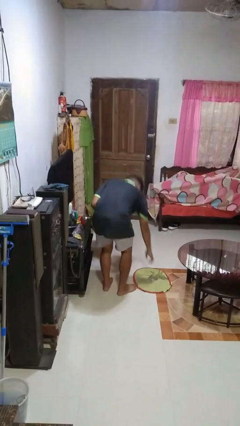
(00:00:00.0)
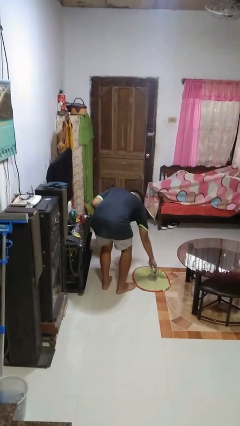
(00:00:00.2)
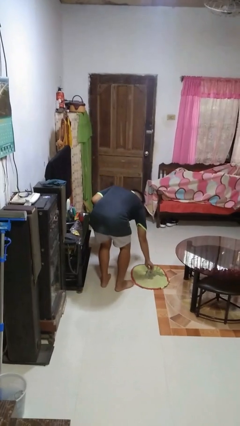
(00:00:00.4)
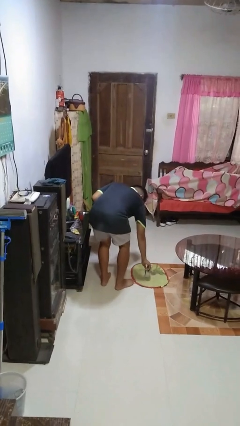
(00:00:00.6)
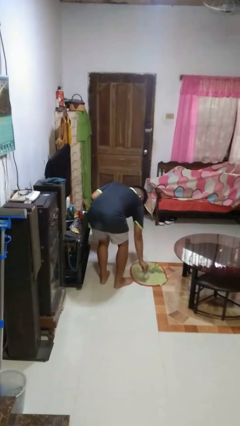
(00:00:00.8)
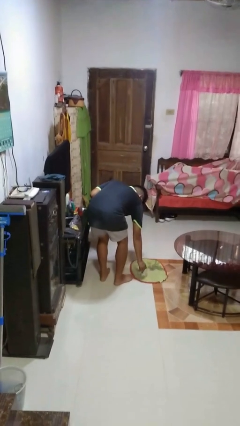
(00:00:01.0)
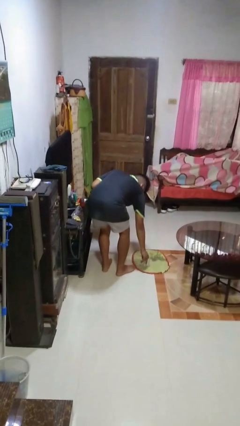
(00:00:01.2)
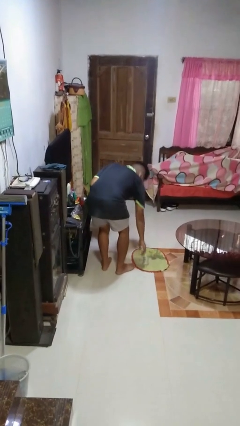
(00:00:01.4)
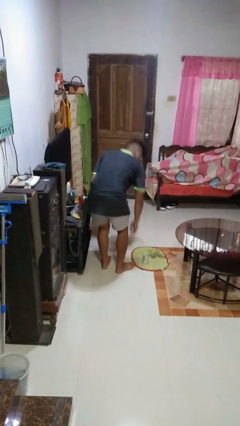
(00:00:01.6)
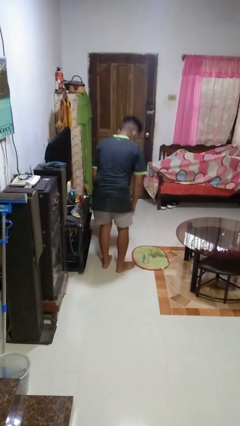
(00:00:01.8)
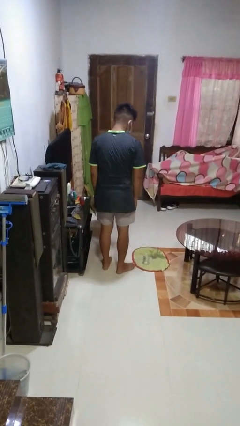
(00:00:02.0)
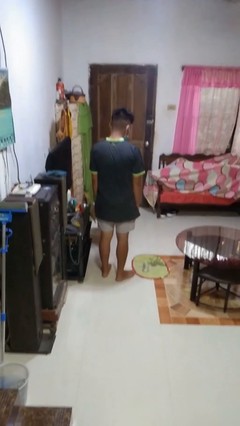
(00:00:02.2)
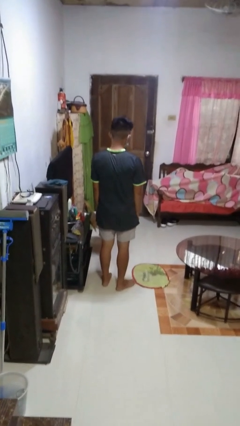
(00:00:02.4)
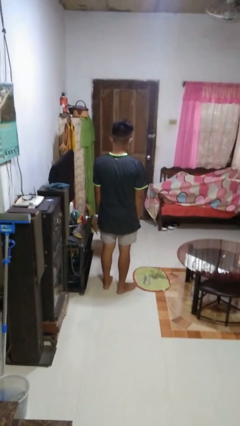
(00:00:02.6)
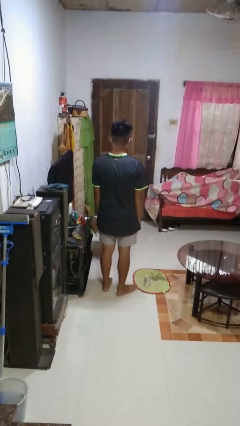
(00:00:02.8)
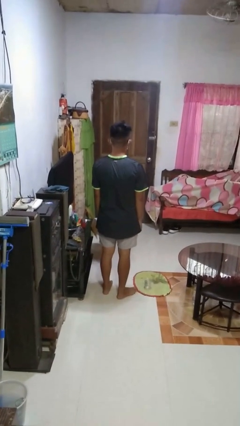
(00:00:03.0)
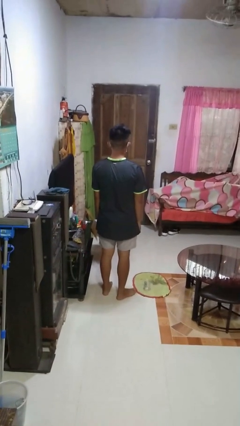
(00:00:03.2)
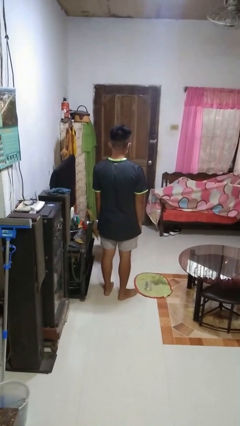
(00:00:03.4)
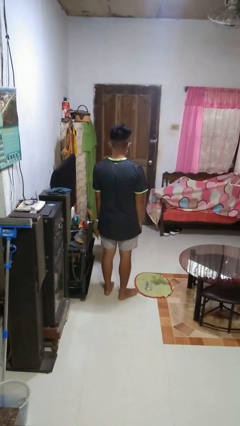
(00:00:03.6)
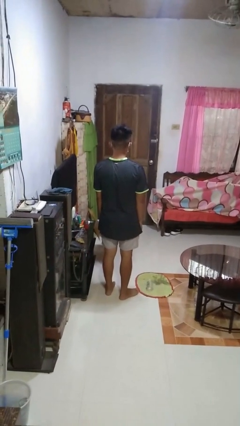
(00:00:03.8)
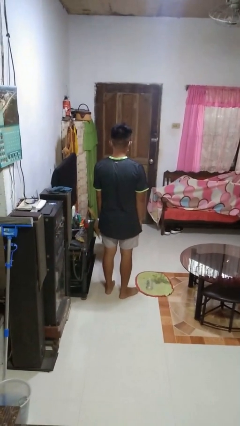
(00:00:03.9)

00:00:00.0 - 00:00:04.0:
person sets upright glass

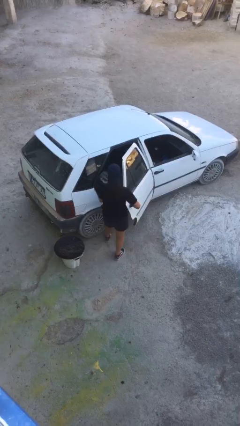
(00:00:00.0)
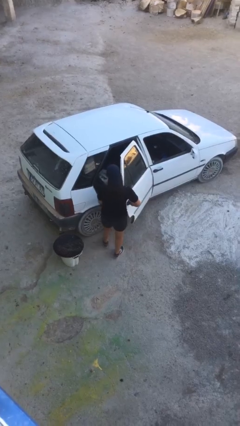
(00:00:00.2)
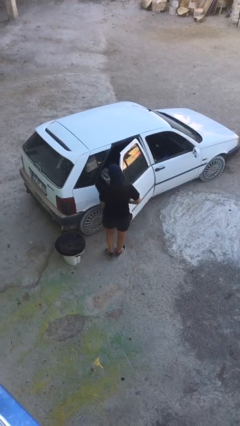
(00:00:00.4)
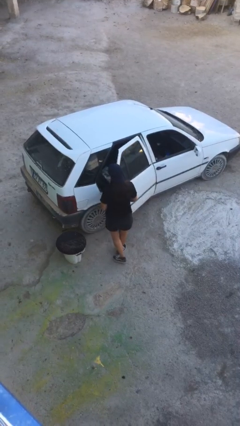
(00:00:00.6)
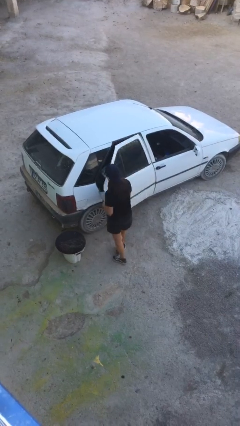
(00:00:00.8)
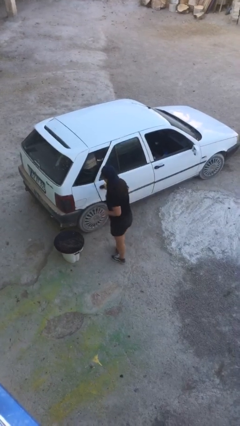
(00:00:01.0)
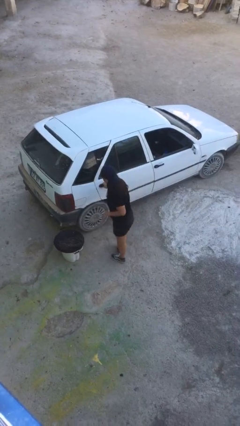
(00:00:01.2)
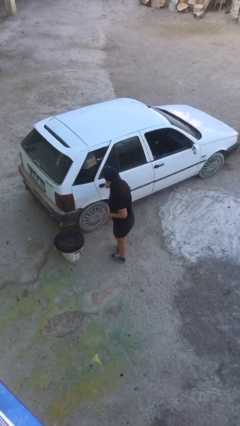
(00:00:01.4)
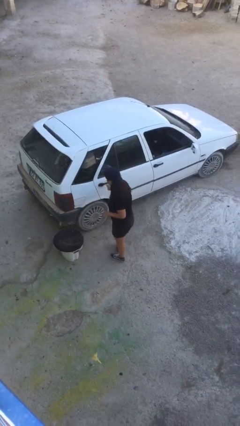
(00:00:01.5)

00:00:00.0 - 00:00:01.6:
person closes car door

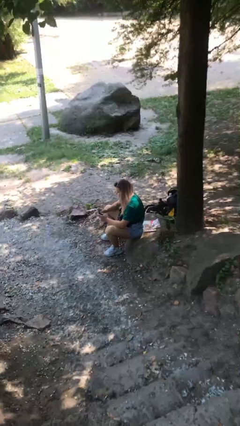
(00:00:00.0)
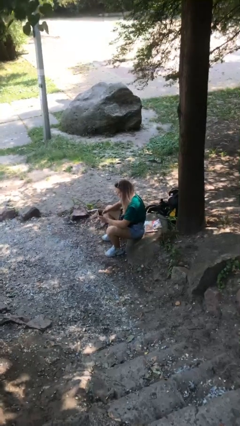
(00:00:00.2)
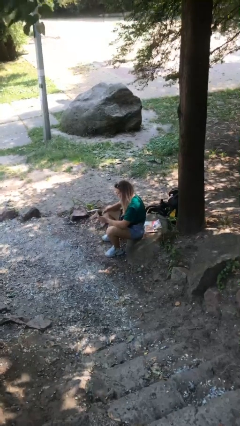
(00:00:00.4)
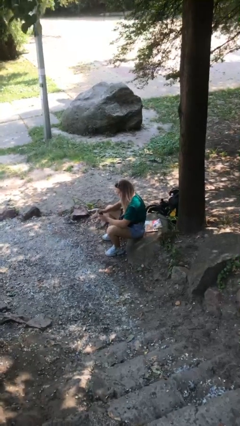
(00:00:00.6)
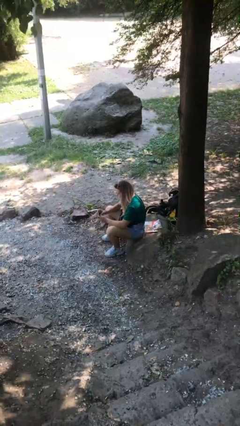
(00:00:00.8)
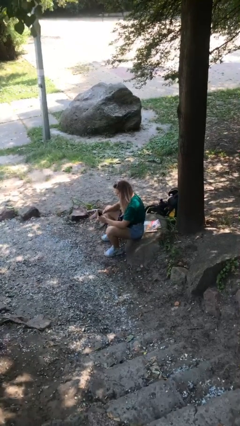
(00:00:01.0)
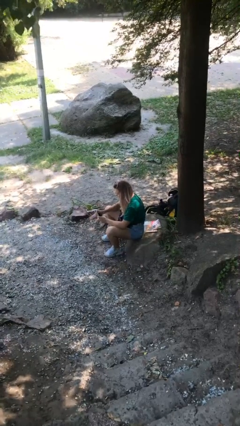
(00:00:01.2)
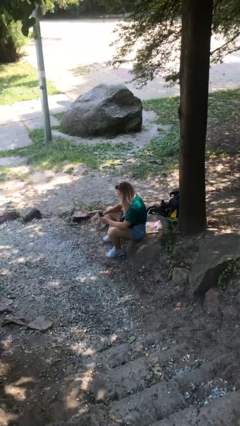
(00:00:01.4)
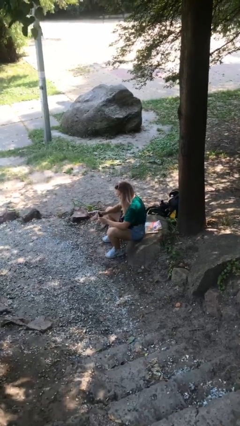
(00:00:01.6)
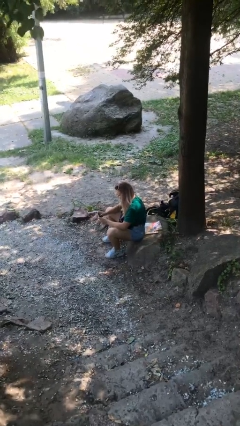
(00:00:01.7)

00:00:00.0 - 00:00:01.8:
person interacts with handheld game

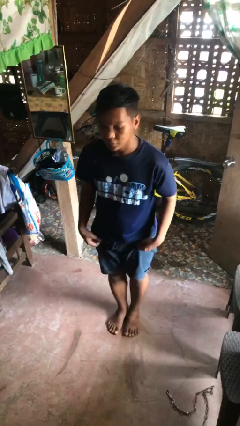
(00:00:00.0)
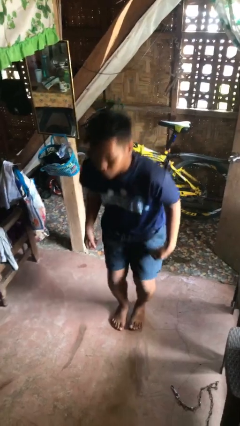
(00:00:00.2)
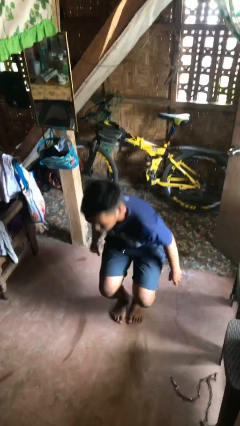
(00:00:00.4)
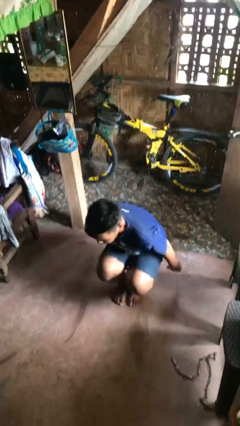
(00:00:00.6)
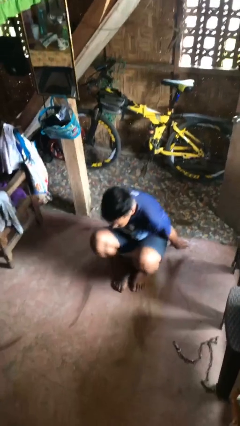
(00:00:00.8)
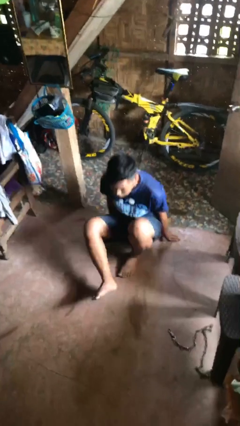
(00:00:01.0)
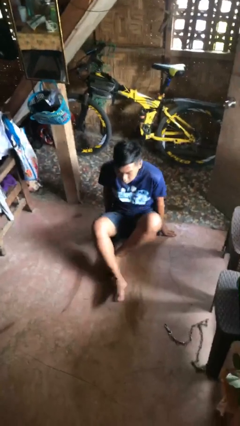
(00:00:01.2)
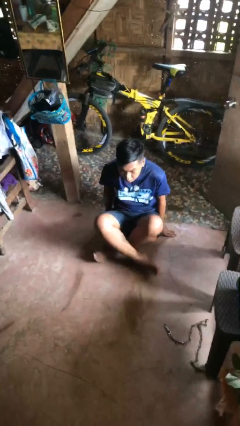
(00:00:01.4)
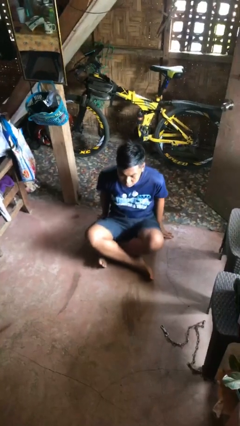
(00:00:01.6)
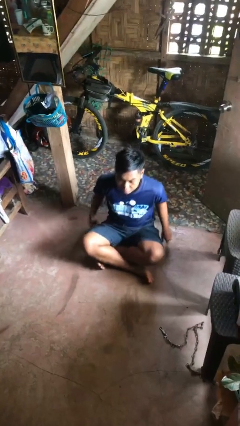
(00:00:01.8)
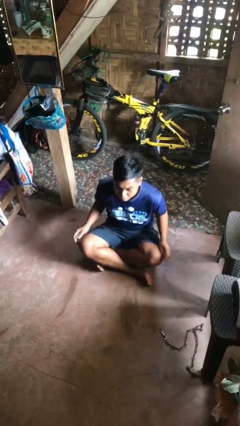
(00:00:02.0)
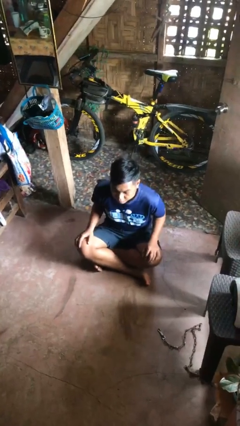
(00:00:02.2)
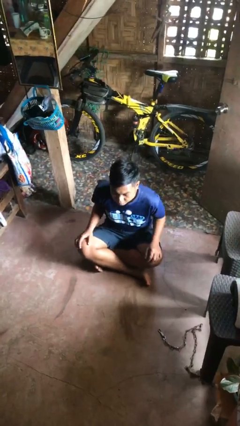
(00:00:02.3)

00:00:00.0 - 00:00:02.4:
person sits crisscross

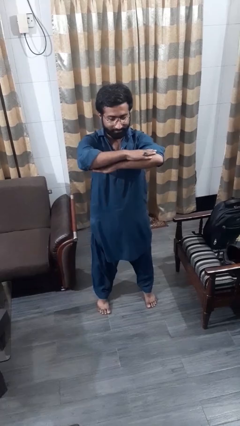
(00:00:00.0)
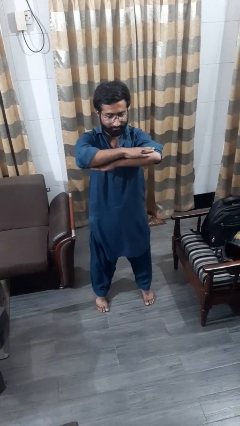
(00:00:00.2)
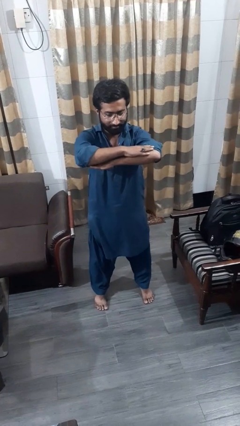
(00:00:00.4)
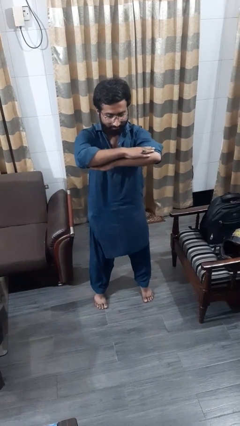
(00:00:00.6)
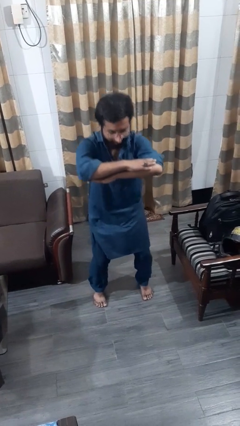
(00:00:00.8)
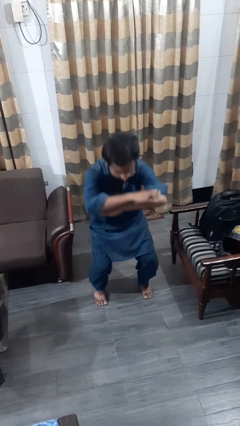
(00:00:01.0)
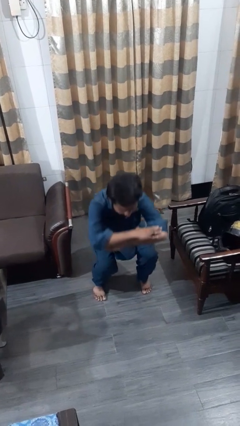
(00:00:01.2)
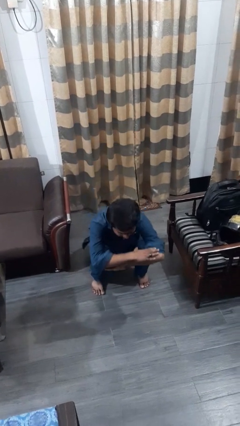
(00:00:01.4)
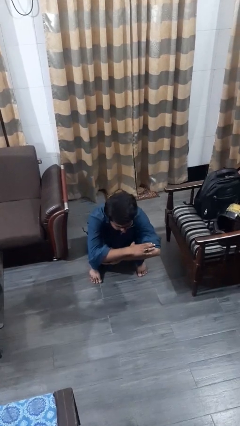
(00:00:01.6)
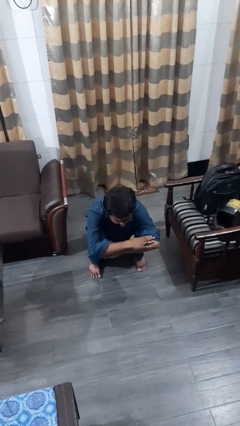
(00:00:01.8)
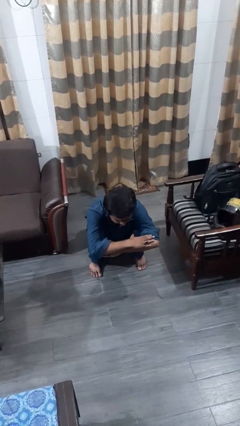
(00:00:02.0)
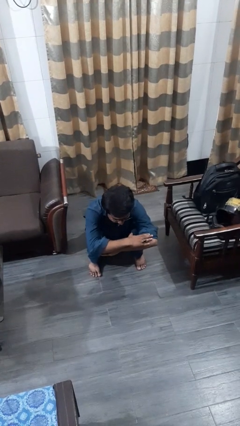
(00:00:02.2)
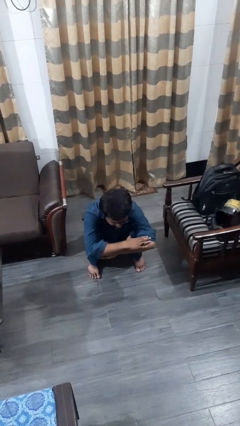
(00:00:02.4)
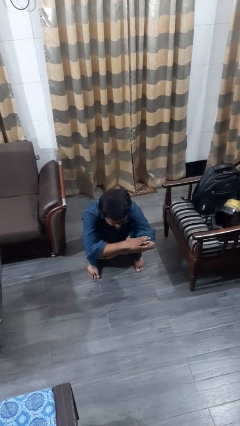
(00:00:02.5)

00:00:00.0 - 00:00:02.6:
person squats

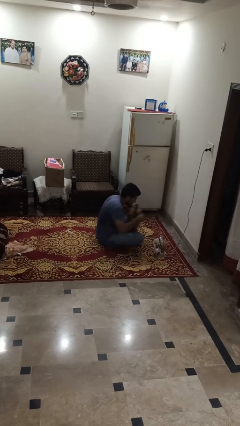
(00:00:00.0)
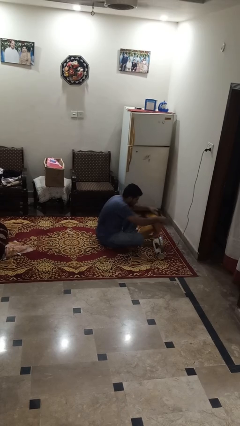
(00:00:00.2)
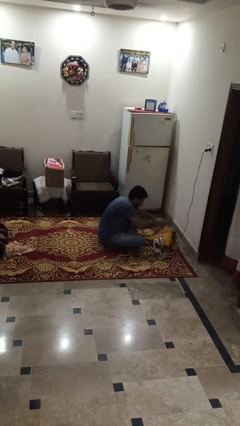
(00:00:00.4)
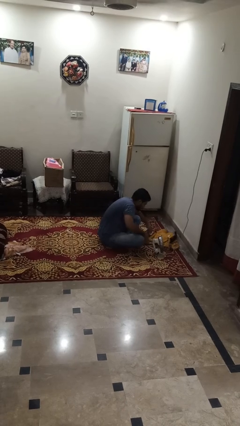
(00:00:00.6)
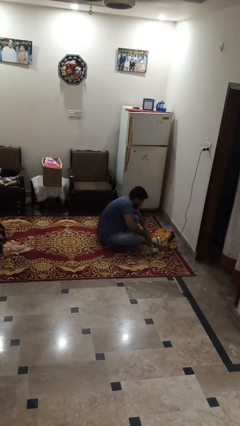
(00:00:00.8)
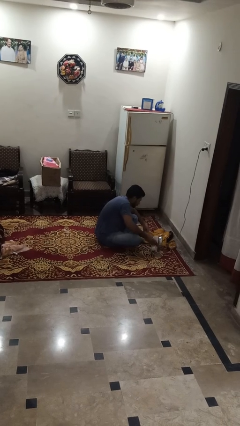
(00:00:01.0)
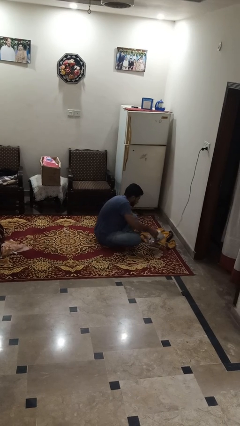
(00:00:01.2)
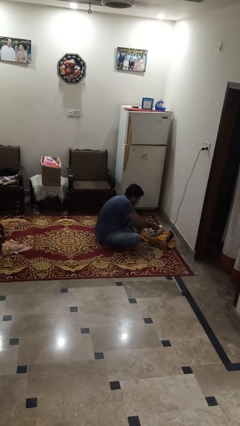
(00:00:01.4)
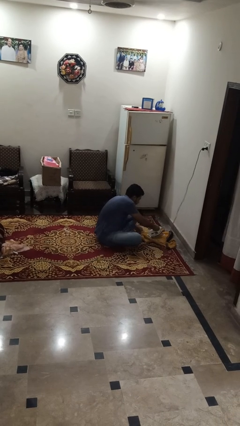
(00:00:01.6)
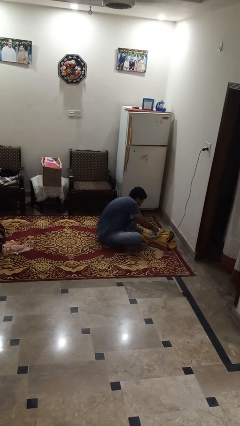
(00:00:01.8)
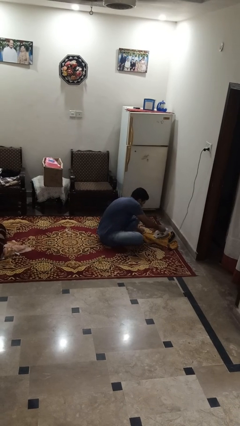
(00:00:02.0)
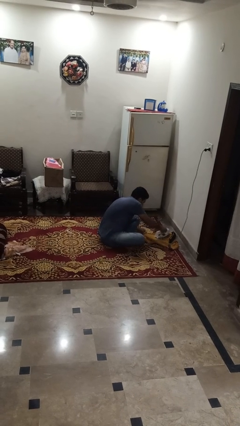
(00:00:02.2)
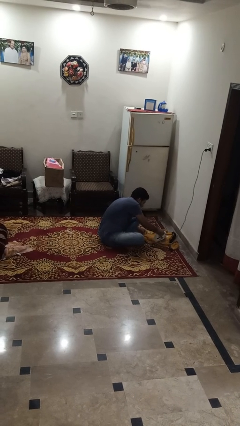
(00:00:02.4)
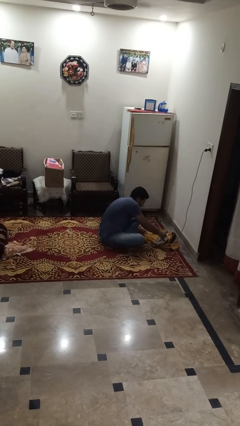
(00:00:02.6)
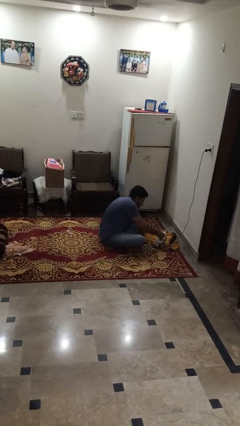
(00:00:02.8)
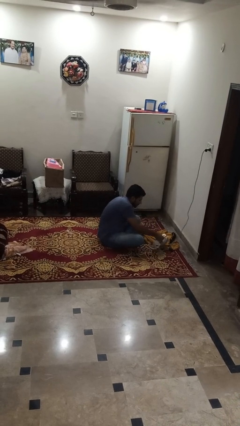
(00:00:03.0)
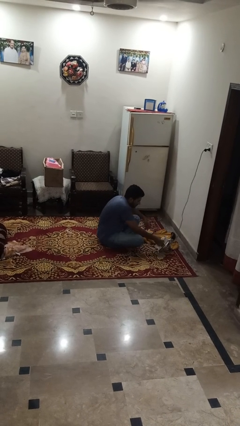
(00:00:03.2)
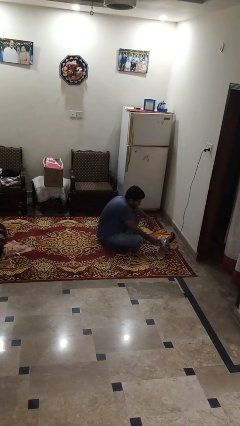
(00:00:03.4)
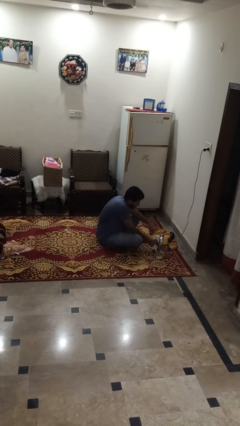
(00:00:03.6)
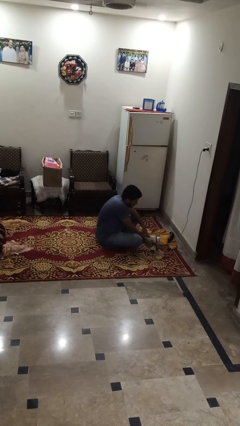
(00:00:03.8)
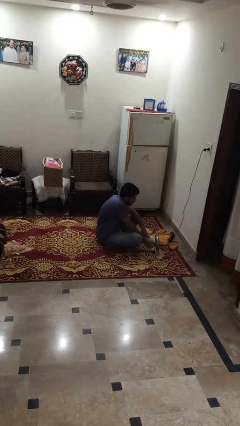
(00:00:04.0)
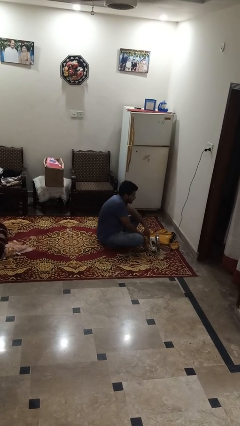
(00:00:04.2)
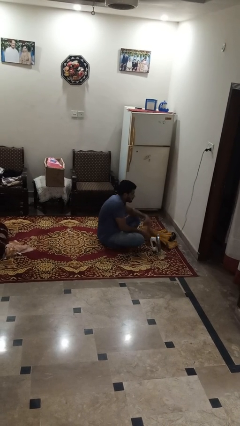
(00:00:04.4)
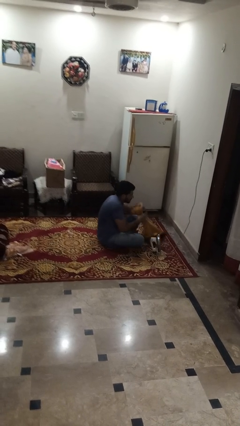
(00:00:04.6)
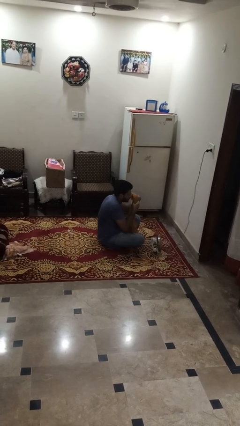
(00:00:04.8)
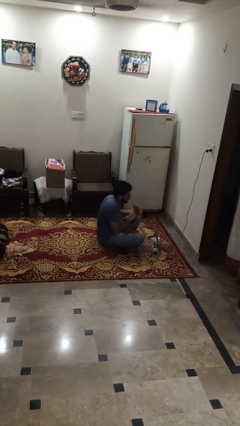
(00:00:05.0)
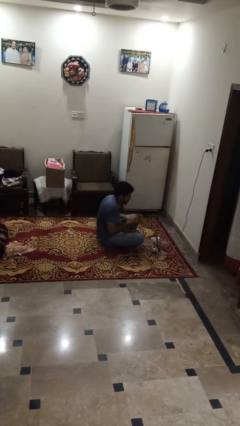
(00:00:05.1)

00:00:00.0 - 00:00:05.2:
person irons clothes
